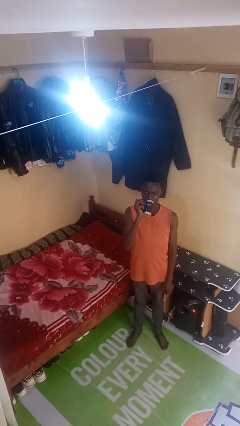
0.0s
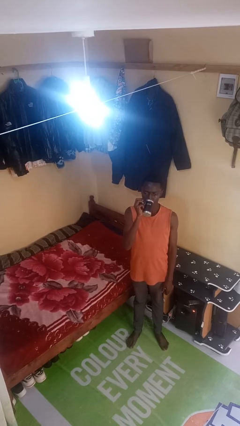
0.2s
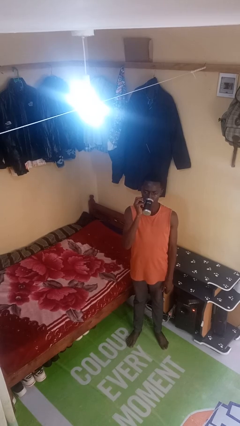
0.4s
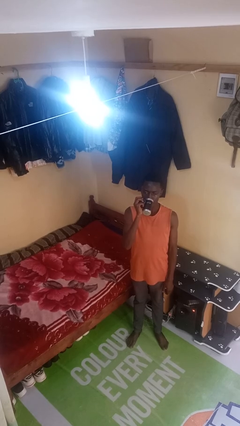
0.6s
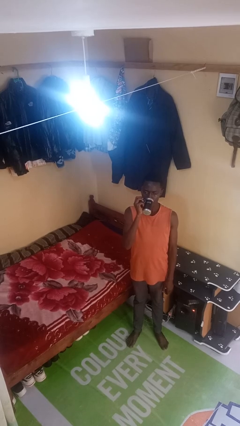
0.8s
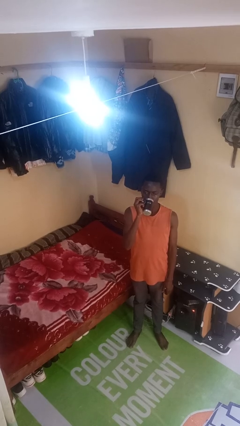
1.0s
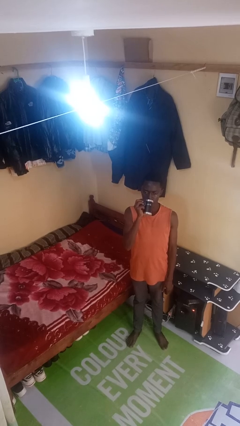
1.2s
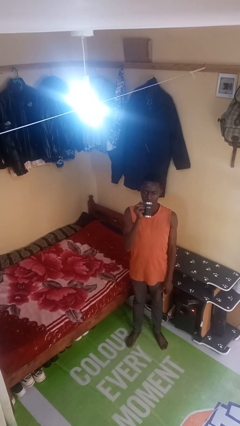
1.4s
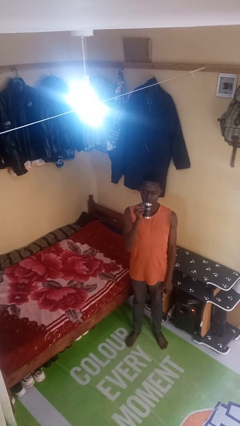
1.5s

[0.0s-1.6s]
person drinks from beverage can

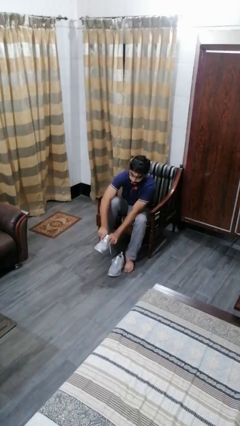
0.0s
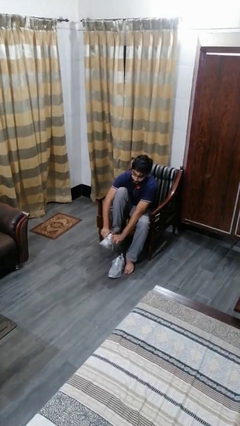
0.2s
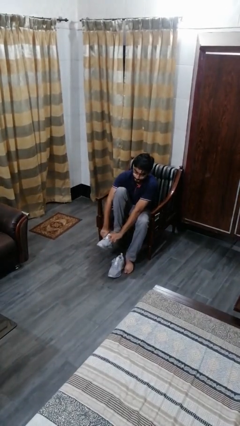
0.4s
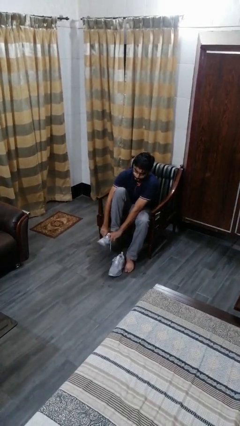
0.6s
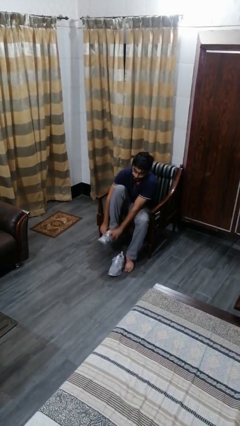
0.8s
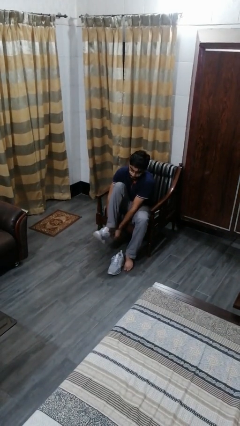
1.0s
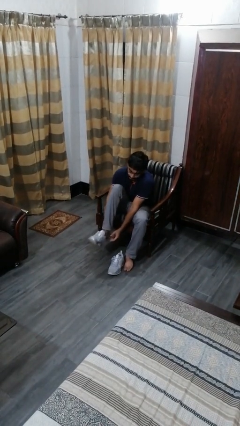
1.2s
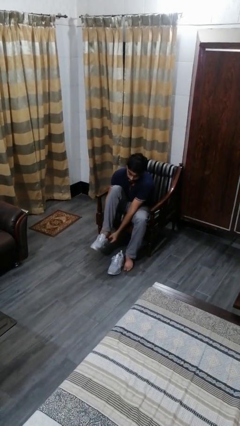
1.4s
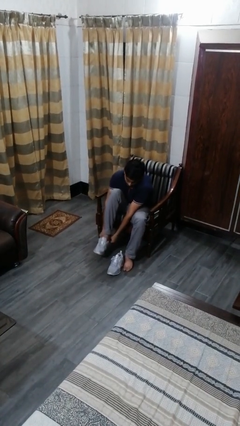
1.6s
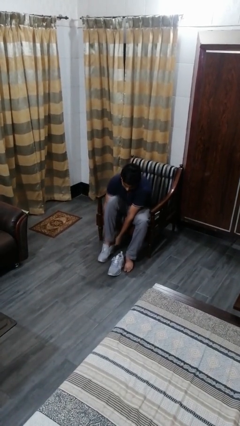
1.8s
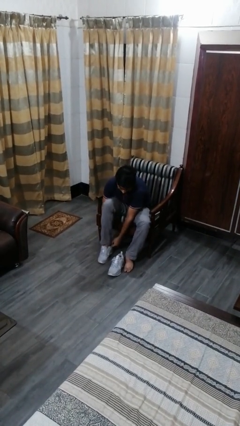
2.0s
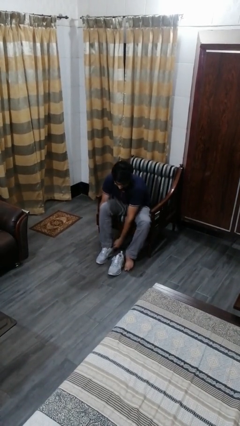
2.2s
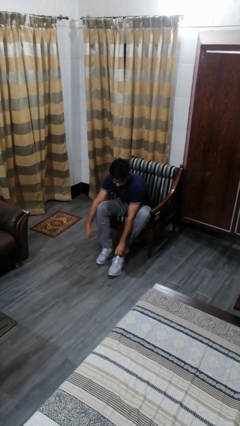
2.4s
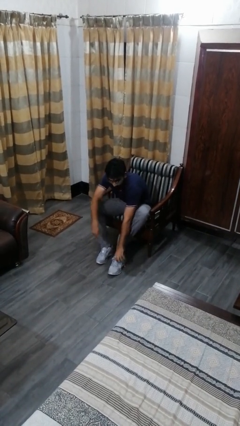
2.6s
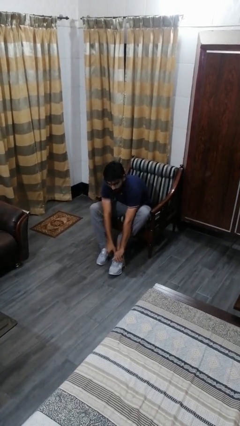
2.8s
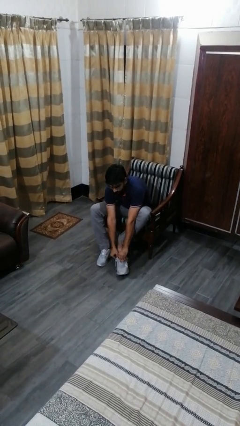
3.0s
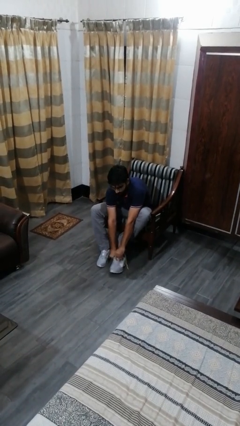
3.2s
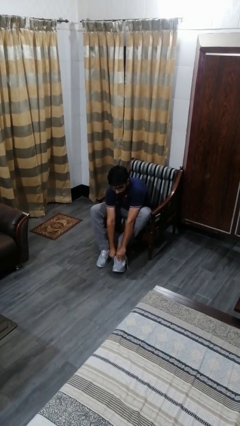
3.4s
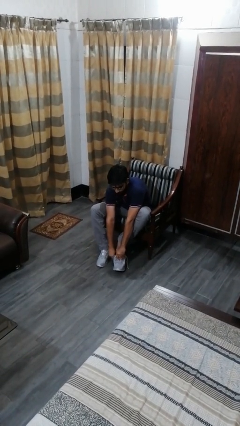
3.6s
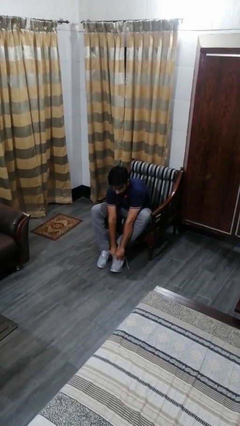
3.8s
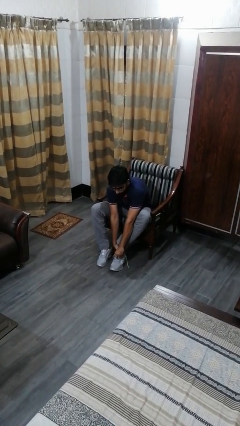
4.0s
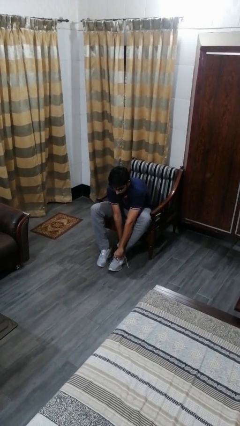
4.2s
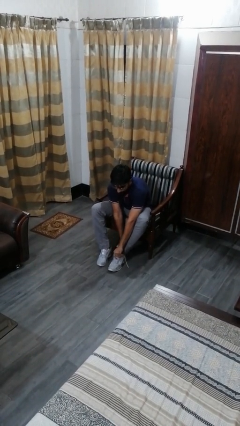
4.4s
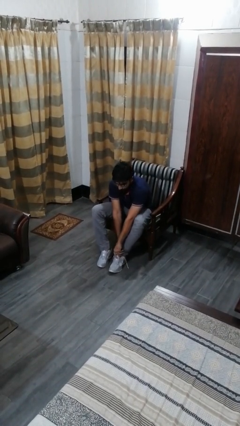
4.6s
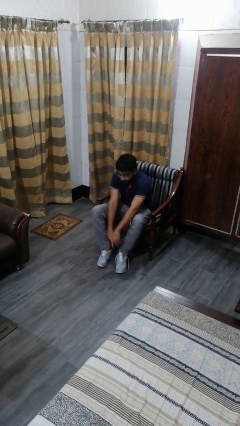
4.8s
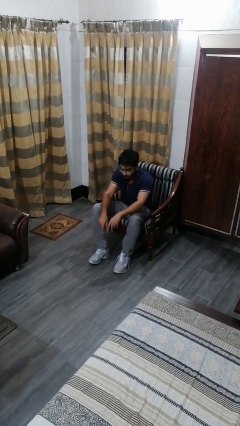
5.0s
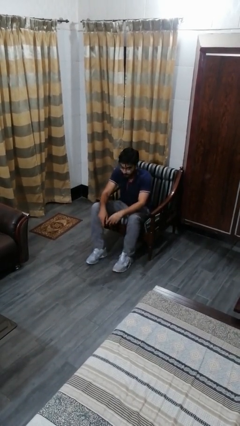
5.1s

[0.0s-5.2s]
person puts on shoes

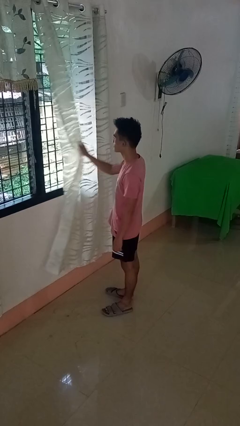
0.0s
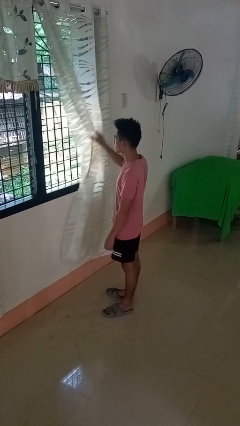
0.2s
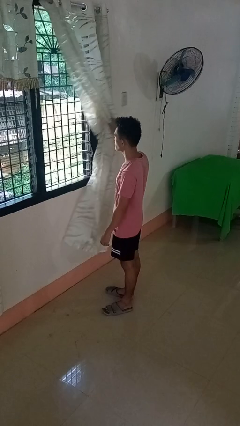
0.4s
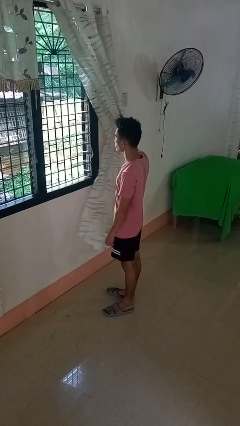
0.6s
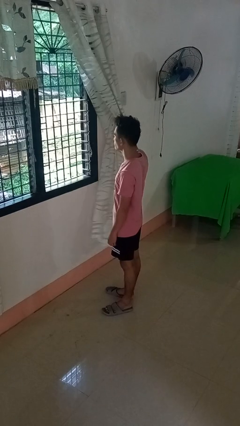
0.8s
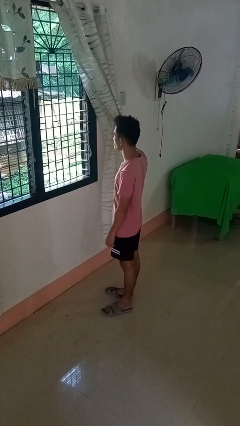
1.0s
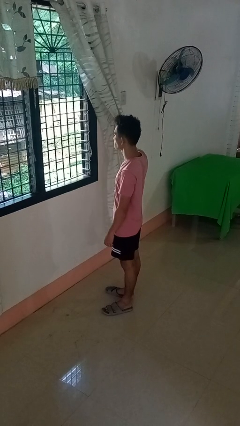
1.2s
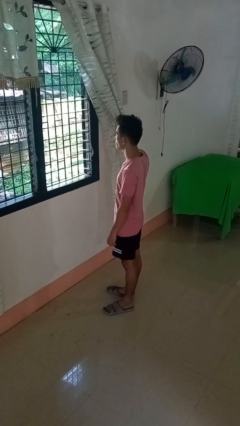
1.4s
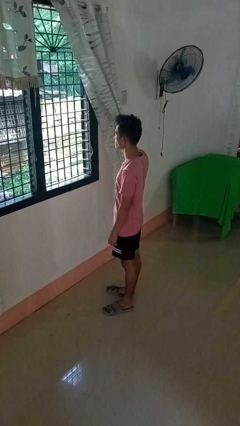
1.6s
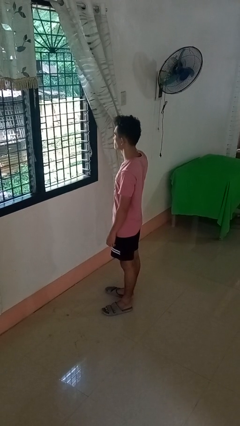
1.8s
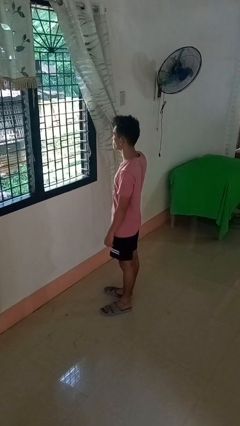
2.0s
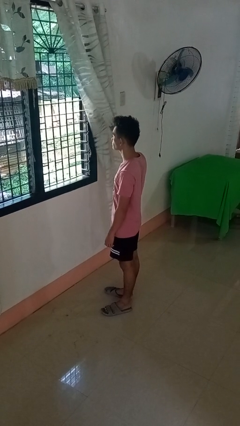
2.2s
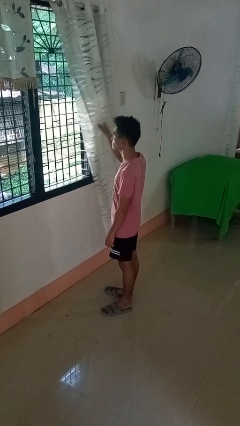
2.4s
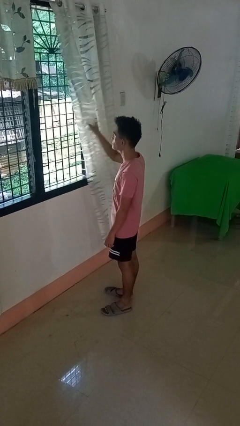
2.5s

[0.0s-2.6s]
person opens curtains

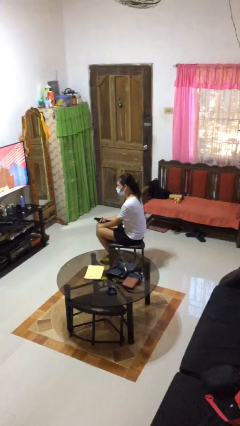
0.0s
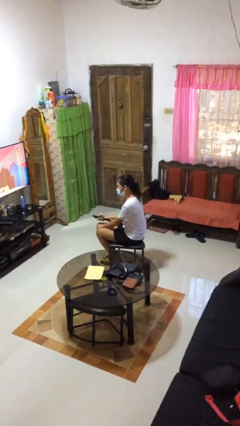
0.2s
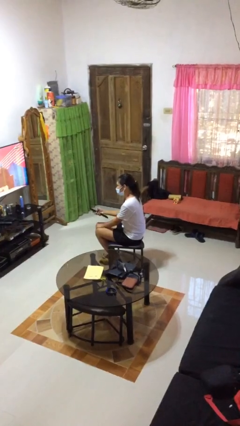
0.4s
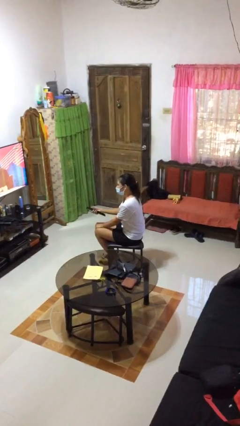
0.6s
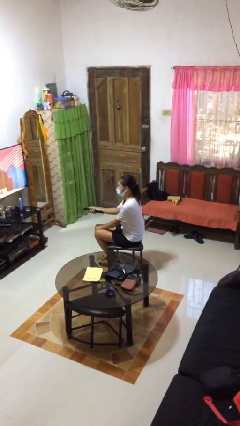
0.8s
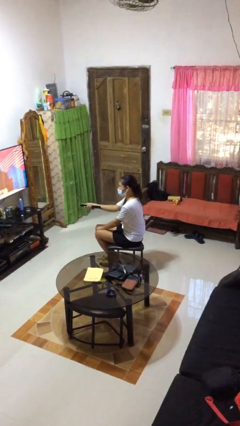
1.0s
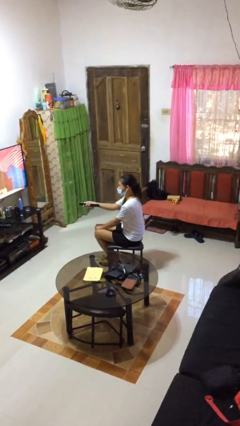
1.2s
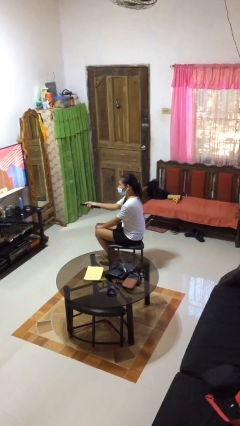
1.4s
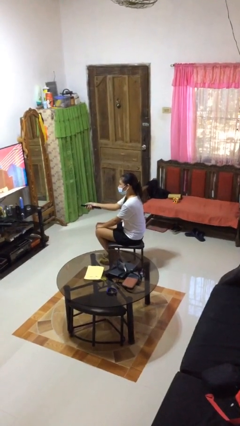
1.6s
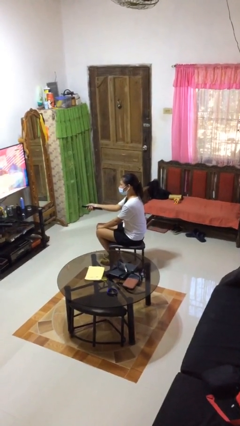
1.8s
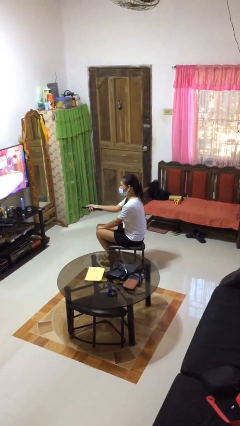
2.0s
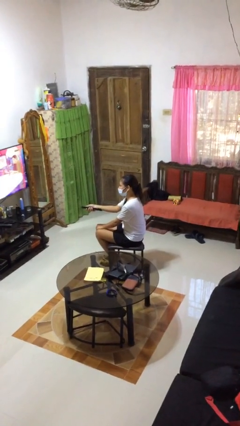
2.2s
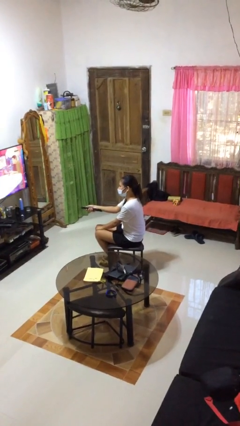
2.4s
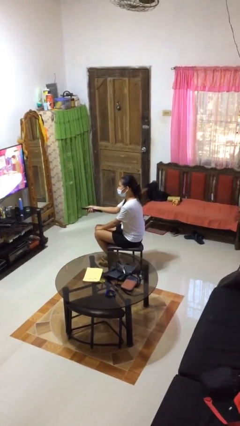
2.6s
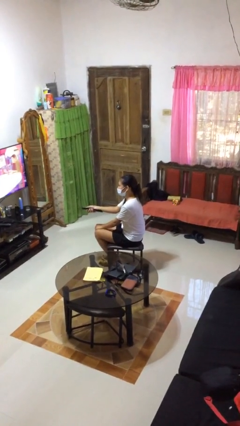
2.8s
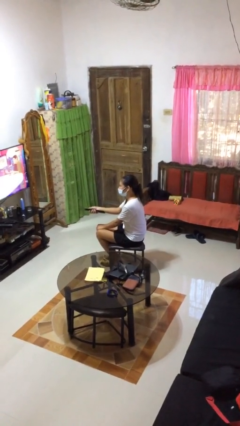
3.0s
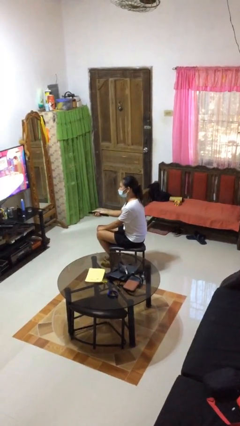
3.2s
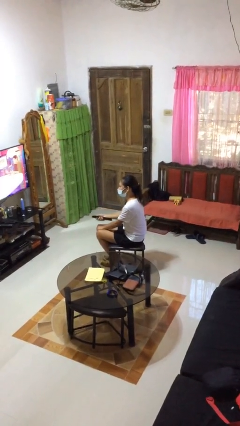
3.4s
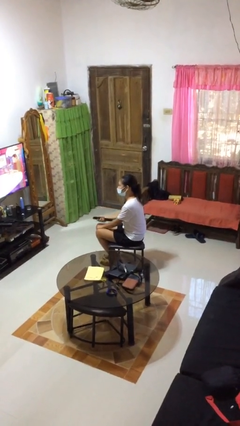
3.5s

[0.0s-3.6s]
person uses television remote

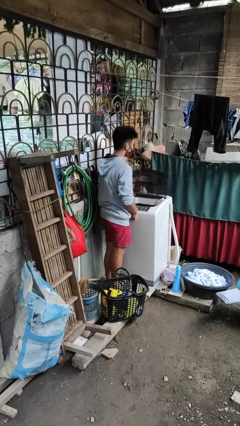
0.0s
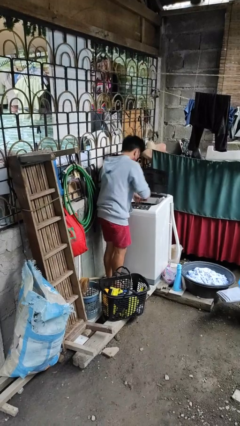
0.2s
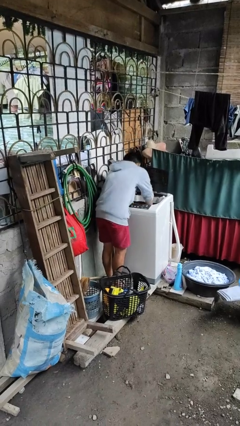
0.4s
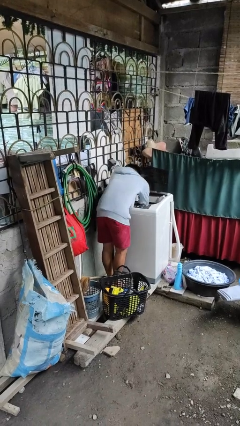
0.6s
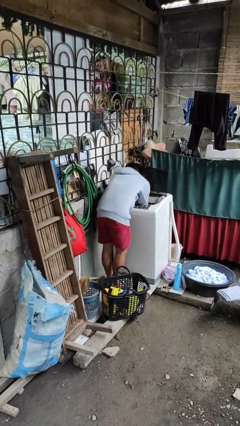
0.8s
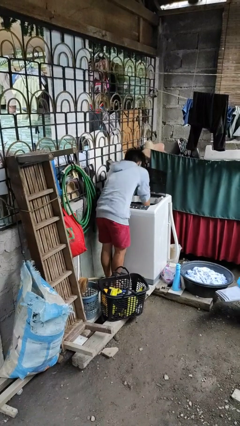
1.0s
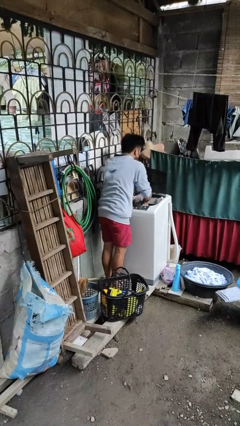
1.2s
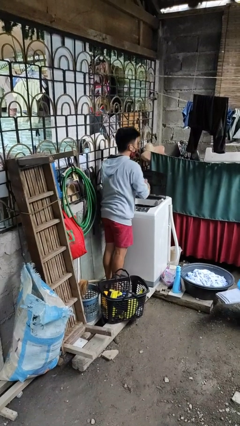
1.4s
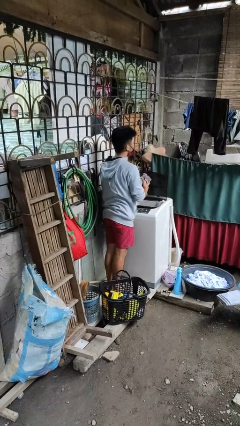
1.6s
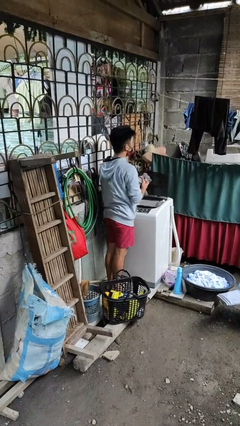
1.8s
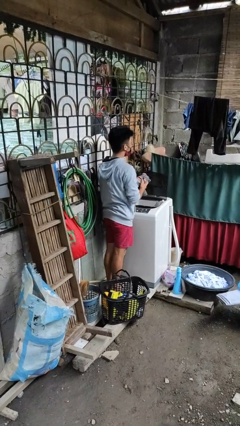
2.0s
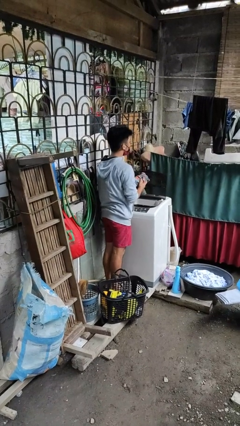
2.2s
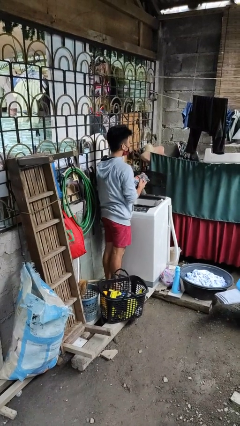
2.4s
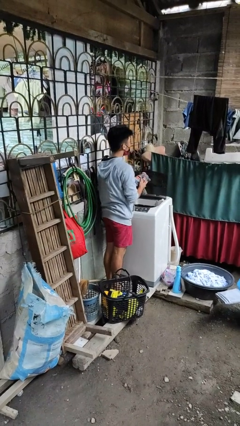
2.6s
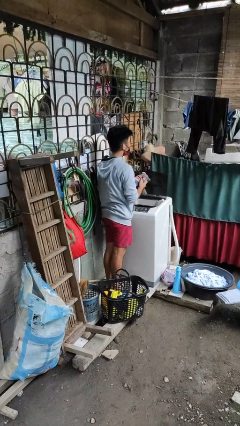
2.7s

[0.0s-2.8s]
person unloads clotheswasher

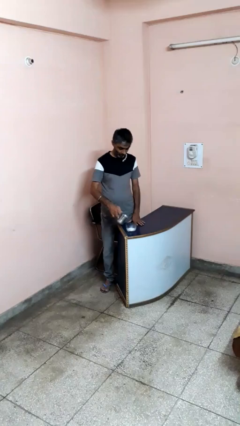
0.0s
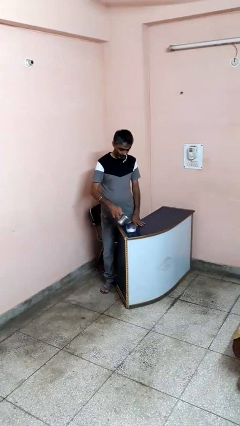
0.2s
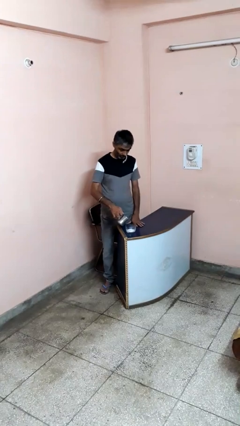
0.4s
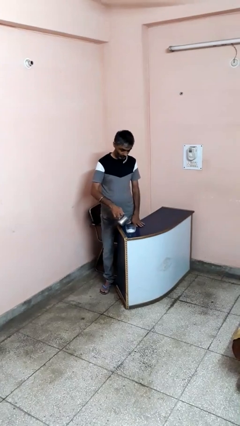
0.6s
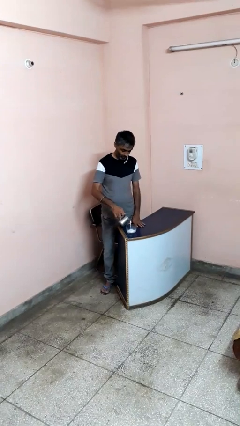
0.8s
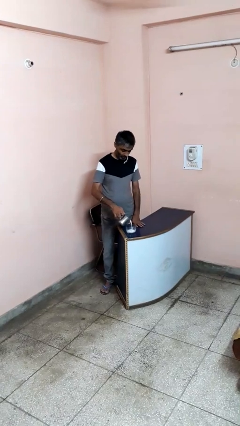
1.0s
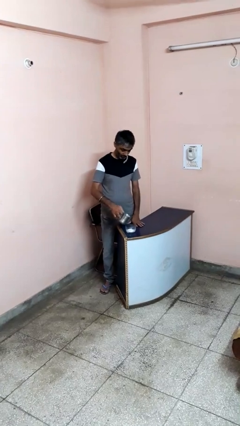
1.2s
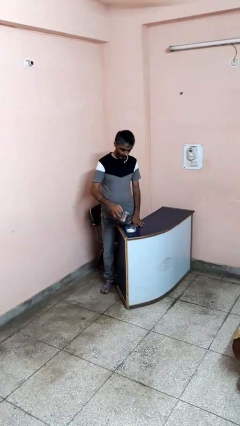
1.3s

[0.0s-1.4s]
person pours into bowl
